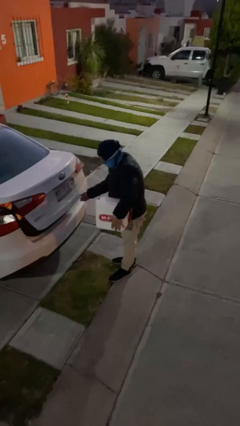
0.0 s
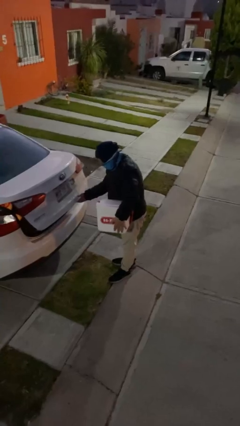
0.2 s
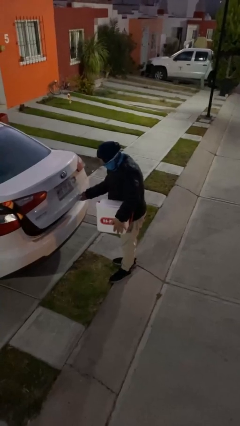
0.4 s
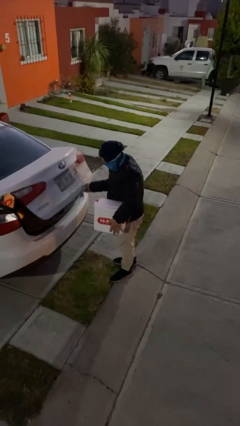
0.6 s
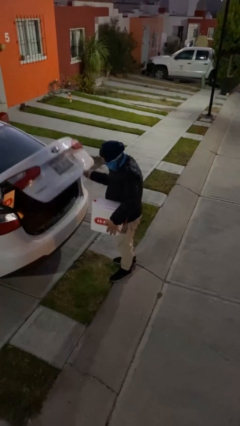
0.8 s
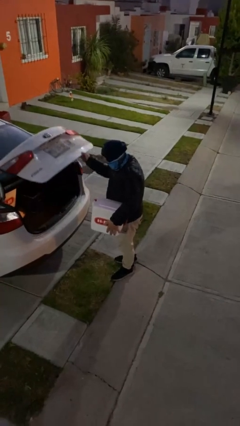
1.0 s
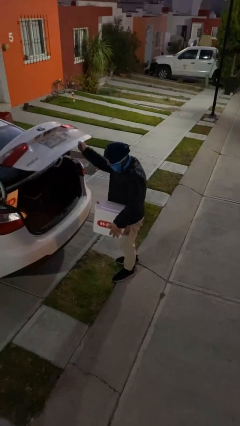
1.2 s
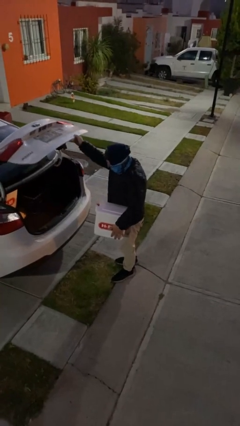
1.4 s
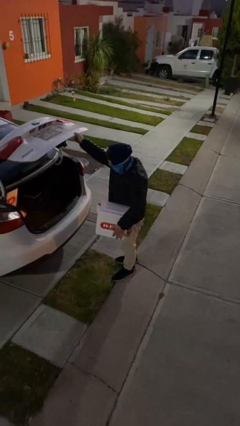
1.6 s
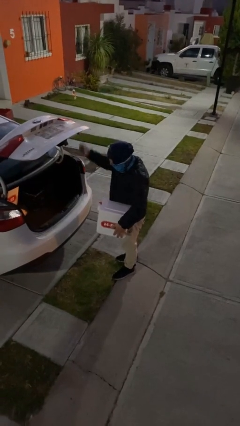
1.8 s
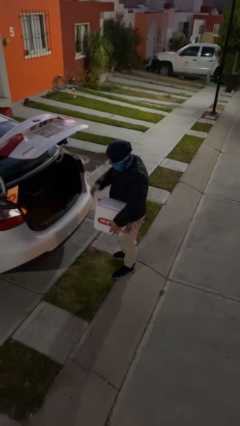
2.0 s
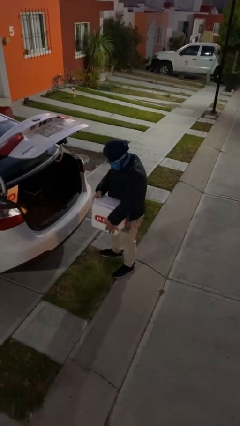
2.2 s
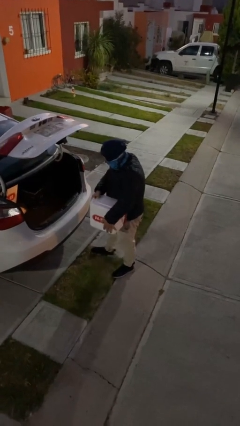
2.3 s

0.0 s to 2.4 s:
person opens car trunk

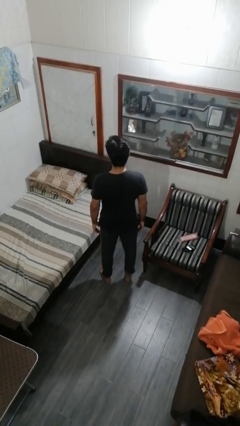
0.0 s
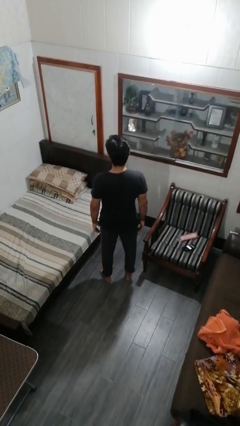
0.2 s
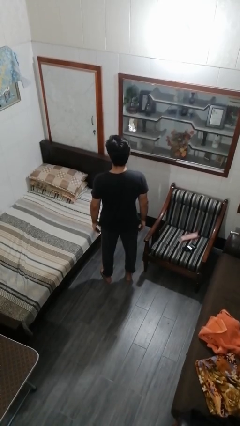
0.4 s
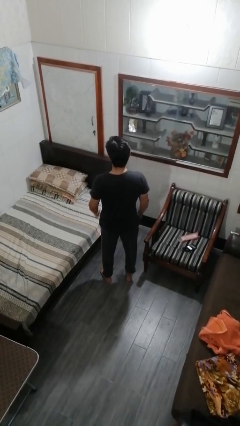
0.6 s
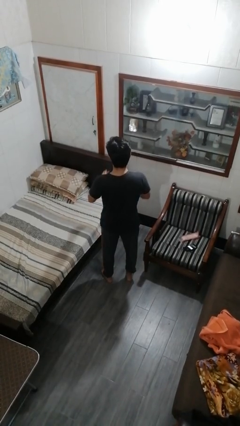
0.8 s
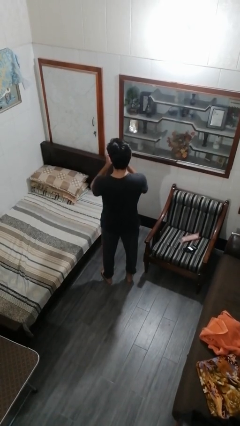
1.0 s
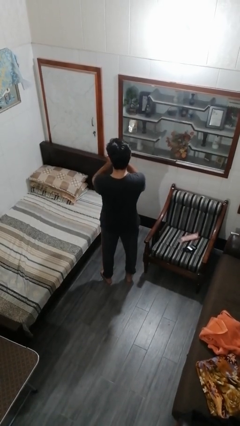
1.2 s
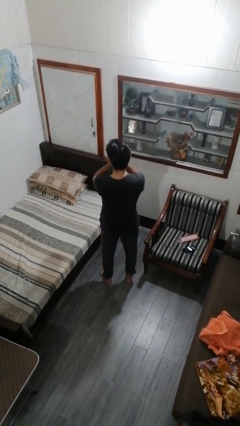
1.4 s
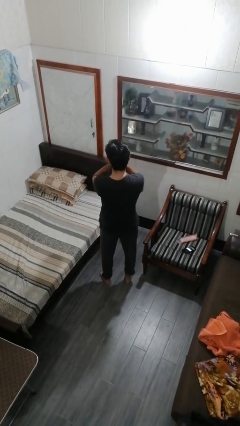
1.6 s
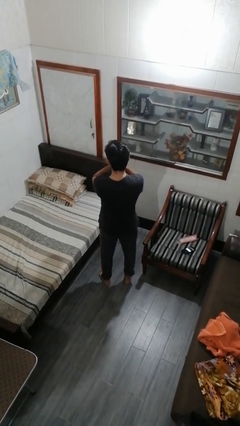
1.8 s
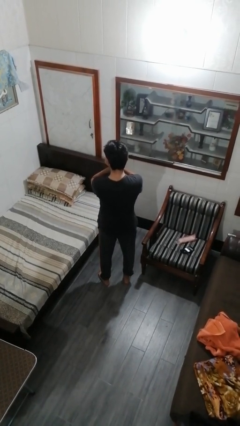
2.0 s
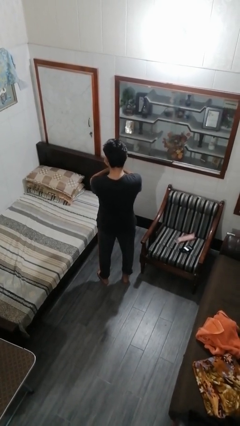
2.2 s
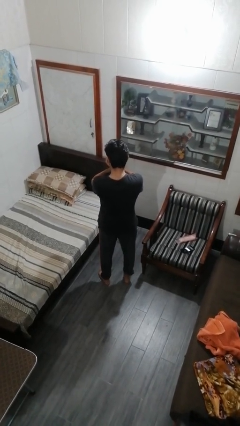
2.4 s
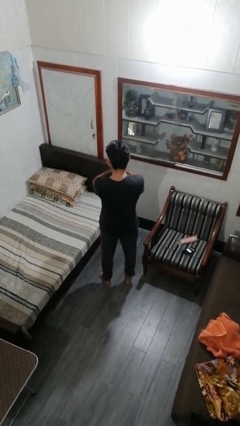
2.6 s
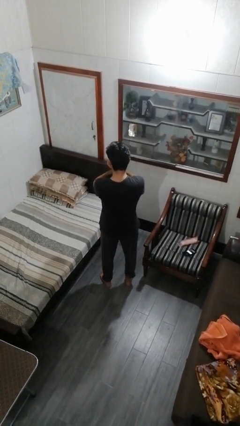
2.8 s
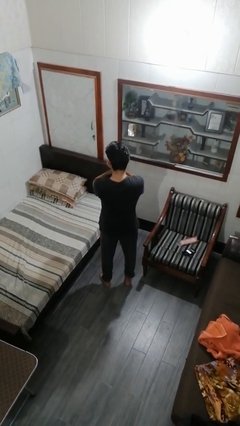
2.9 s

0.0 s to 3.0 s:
person covers face with hands

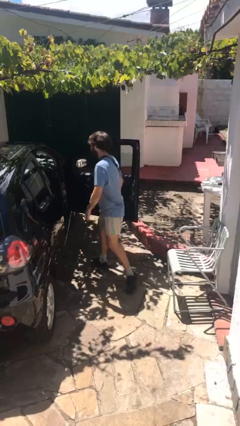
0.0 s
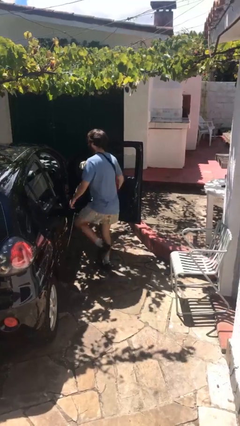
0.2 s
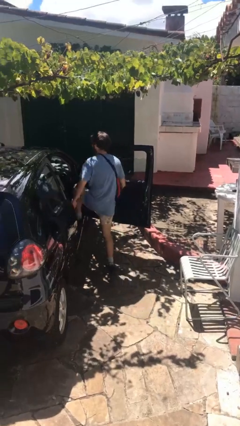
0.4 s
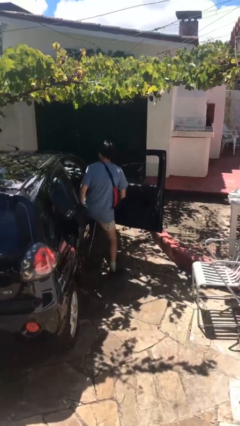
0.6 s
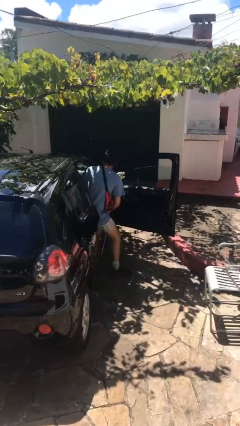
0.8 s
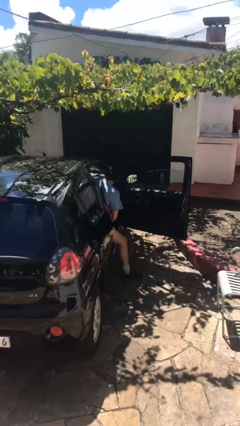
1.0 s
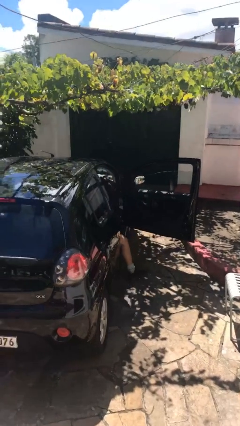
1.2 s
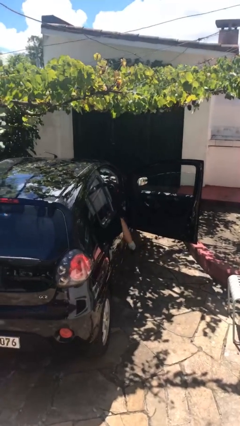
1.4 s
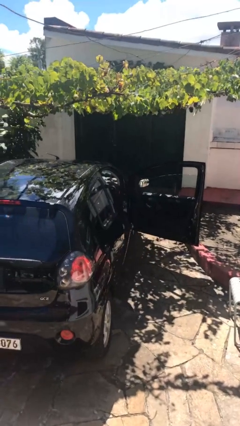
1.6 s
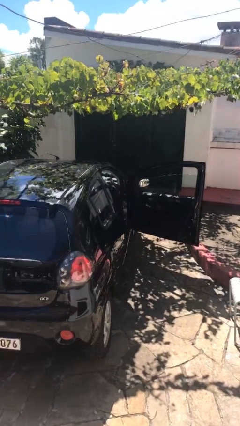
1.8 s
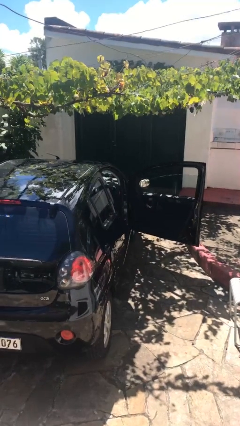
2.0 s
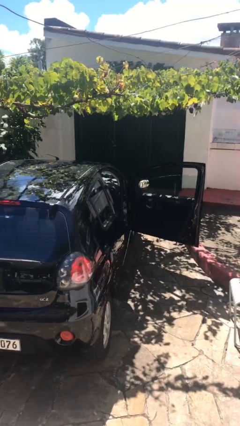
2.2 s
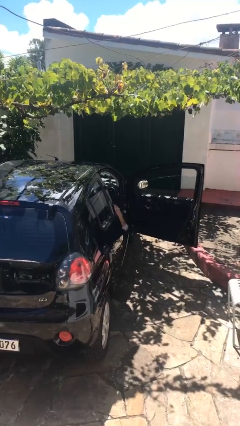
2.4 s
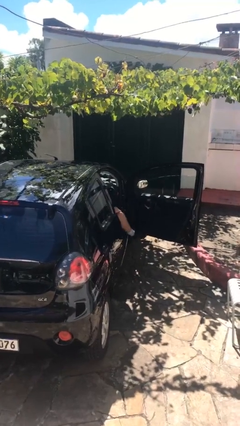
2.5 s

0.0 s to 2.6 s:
person enters car

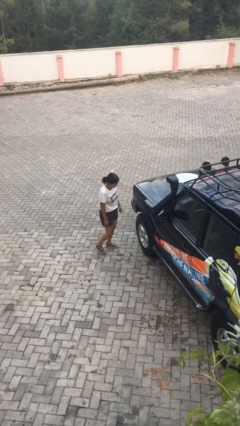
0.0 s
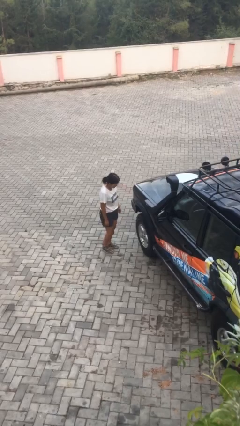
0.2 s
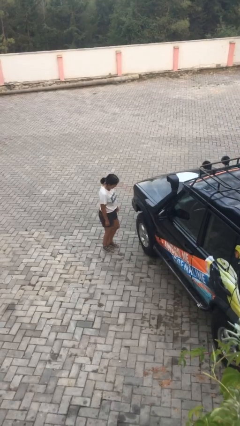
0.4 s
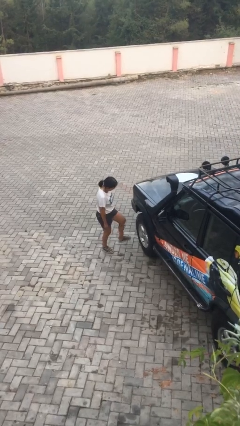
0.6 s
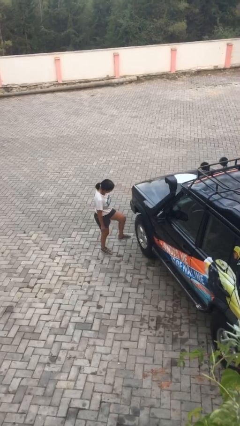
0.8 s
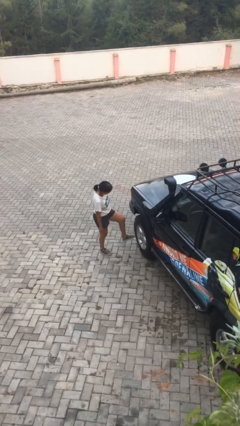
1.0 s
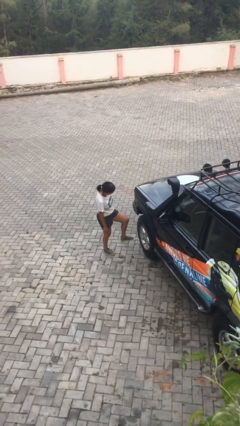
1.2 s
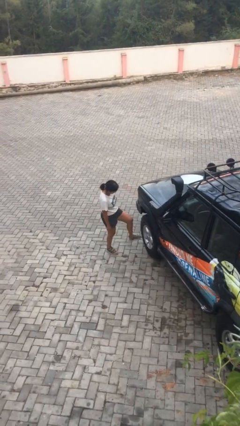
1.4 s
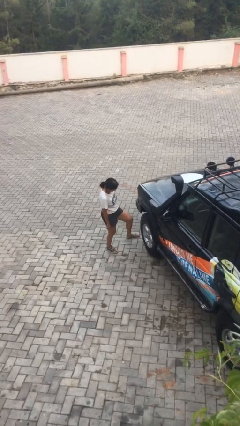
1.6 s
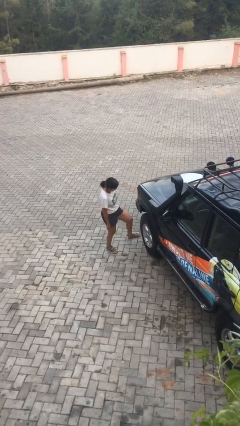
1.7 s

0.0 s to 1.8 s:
person kicks car tires

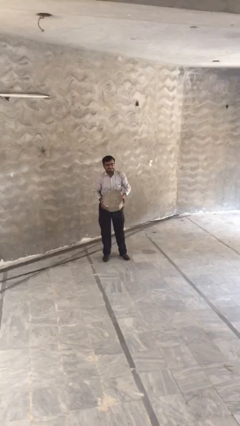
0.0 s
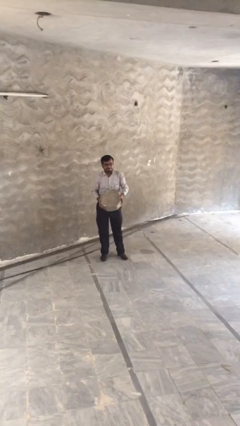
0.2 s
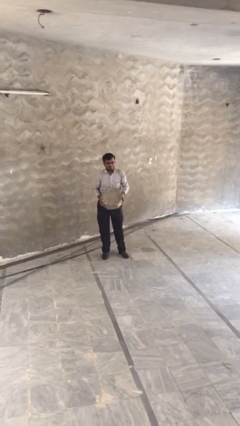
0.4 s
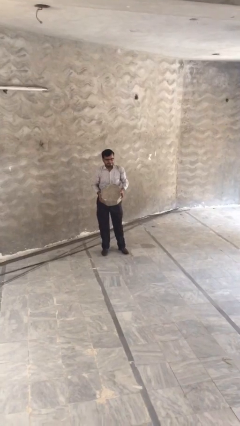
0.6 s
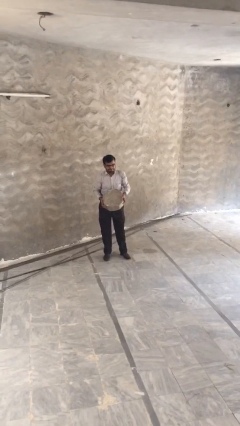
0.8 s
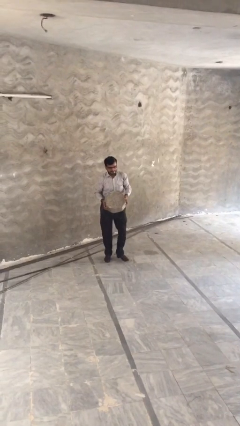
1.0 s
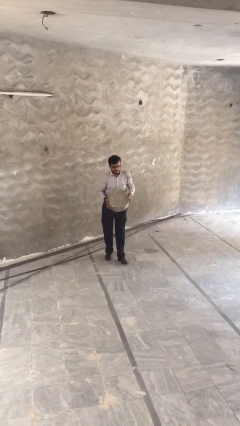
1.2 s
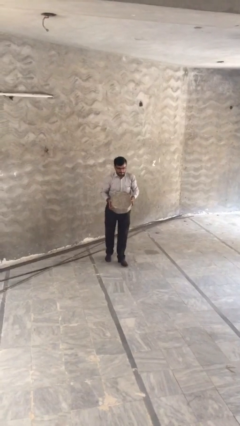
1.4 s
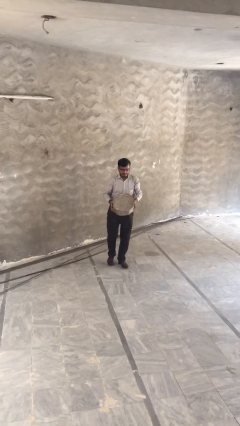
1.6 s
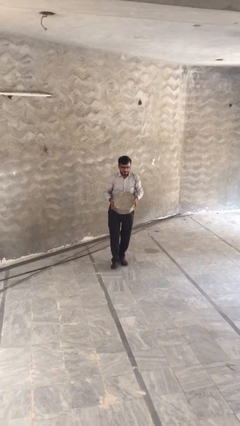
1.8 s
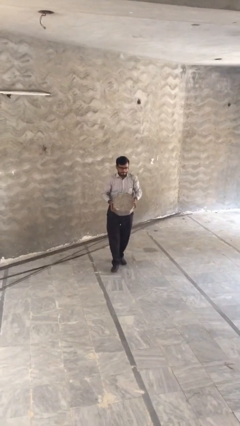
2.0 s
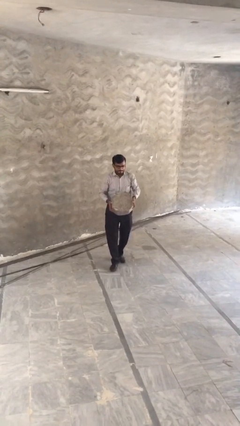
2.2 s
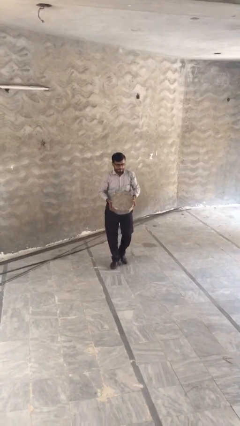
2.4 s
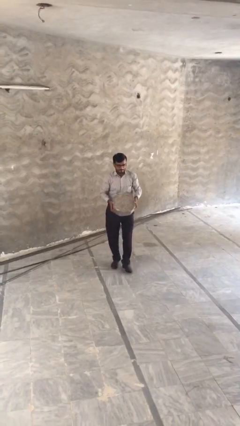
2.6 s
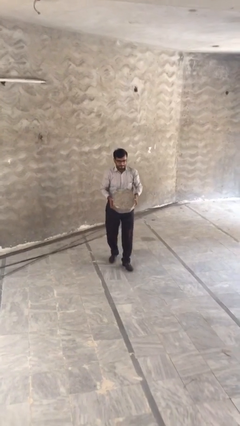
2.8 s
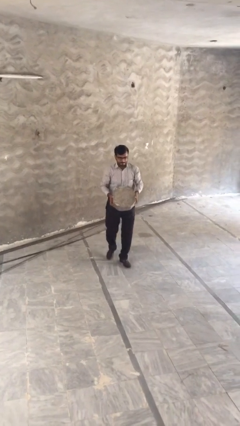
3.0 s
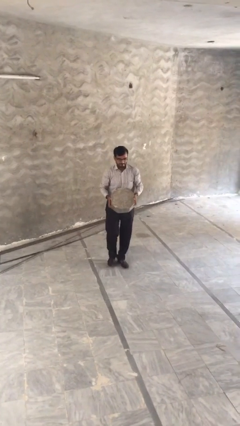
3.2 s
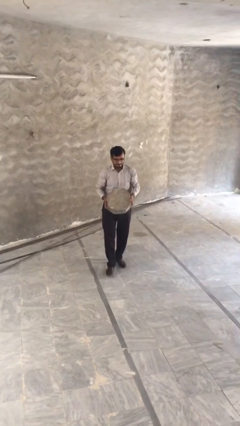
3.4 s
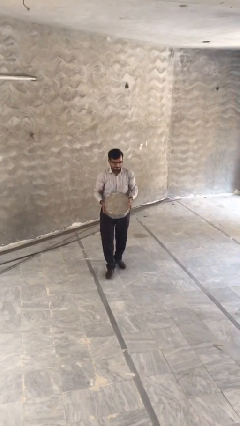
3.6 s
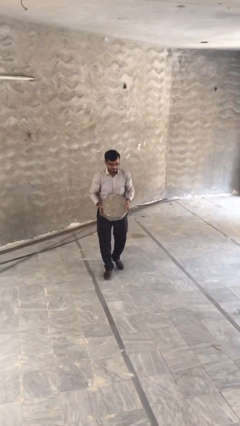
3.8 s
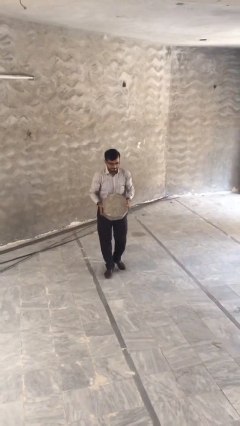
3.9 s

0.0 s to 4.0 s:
person carries heavy object

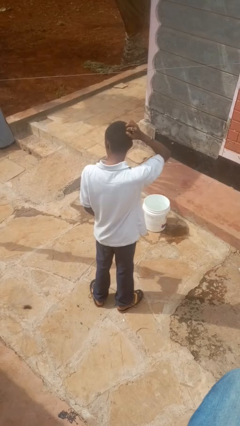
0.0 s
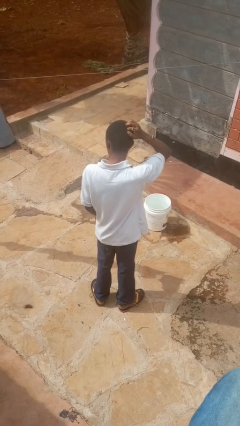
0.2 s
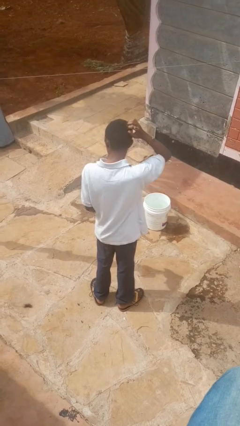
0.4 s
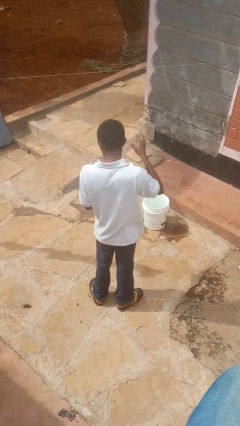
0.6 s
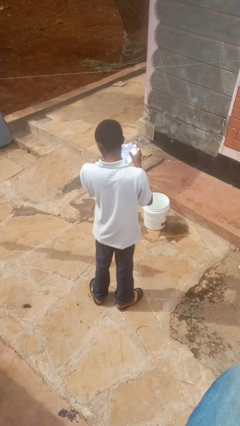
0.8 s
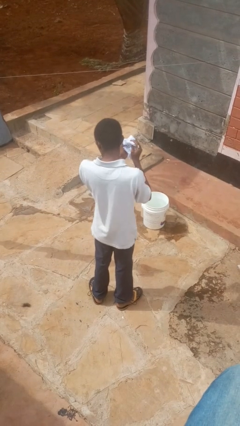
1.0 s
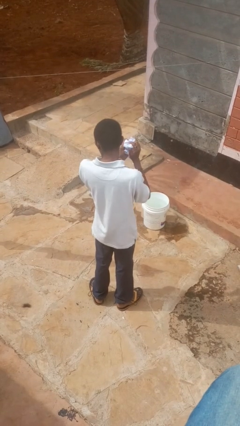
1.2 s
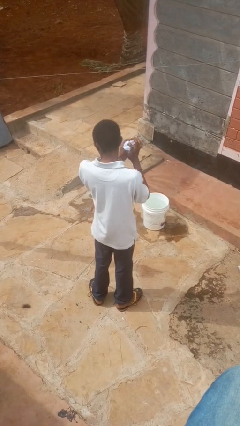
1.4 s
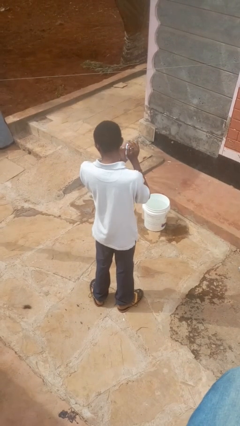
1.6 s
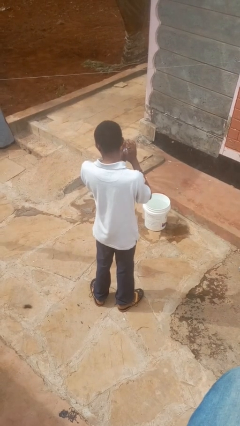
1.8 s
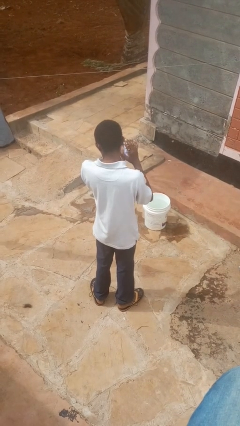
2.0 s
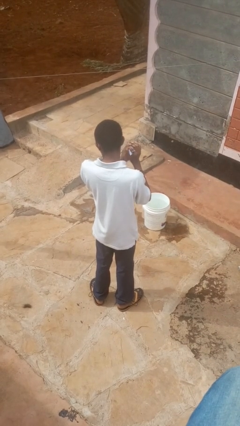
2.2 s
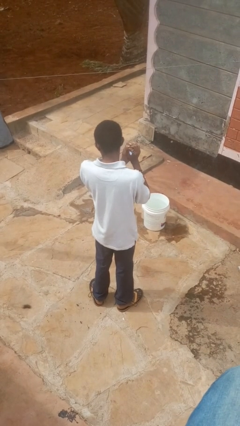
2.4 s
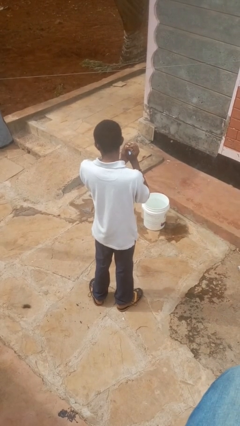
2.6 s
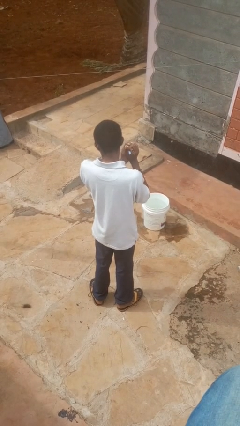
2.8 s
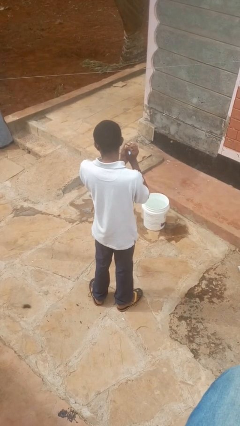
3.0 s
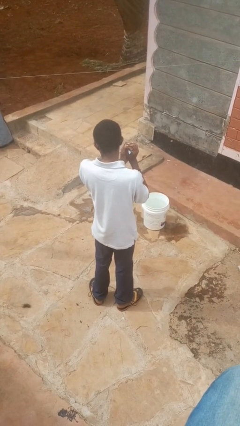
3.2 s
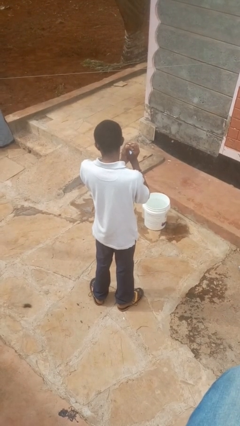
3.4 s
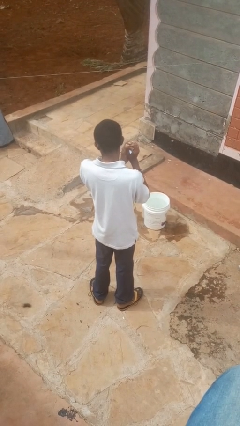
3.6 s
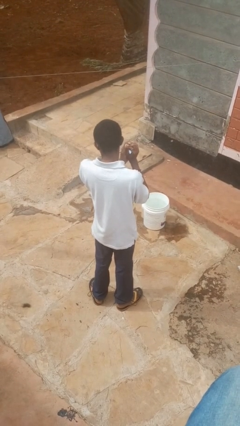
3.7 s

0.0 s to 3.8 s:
person crumples paper
